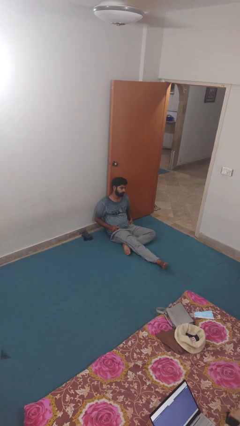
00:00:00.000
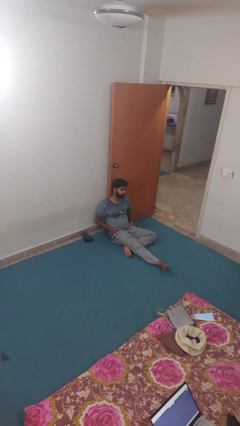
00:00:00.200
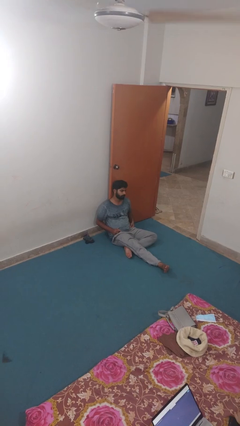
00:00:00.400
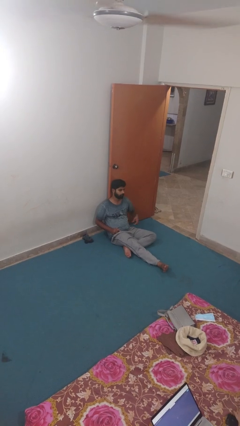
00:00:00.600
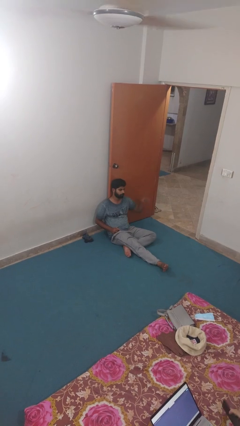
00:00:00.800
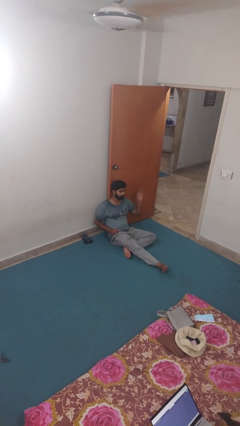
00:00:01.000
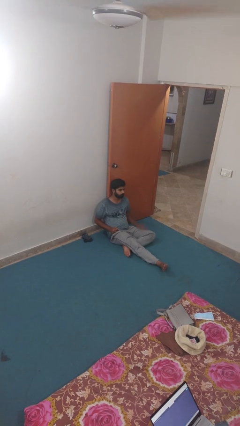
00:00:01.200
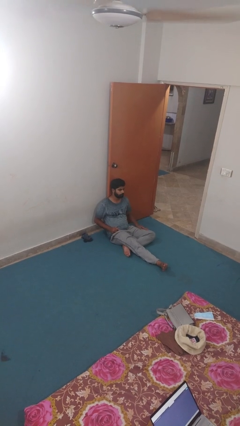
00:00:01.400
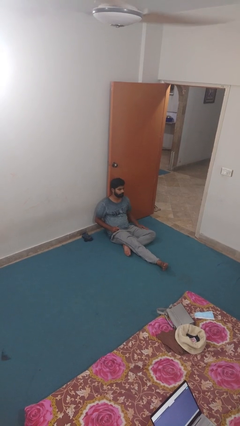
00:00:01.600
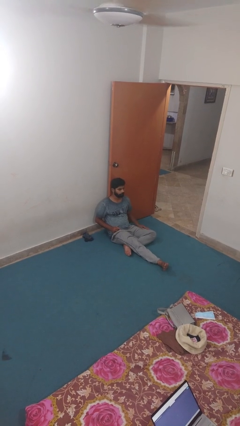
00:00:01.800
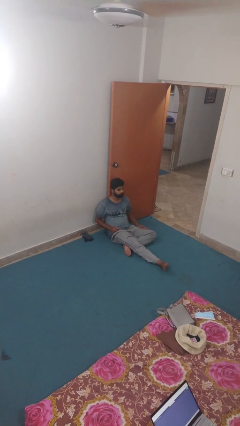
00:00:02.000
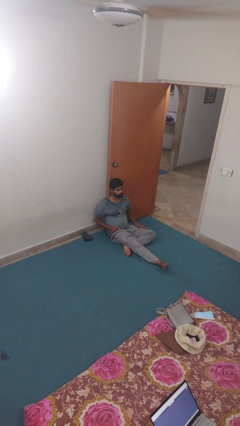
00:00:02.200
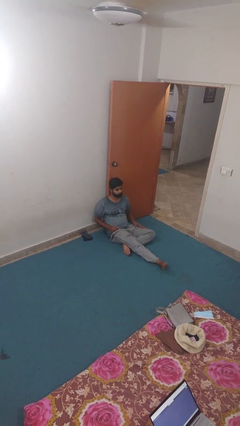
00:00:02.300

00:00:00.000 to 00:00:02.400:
person slaps hands on thighs

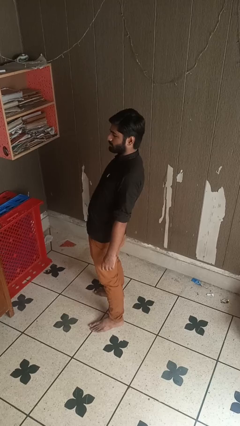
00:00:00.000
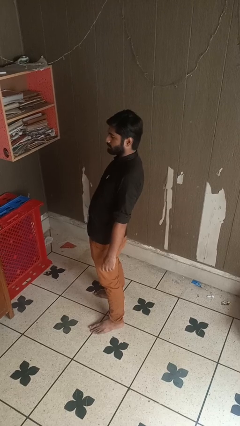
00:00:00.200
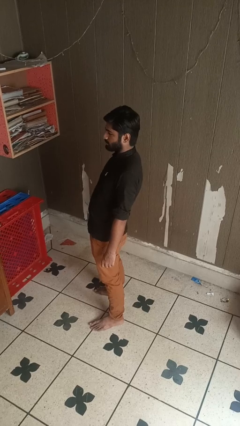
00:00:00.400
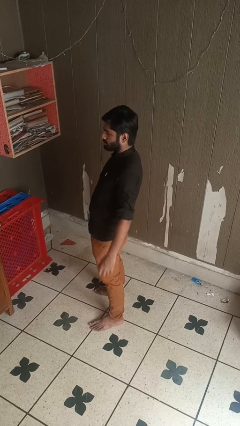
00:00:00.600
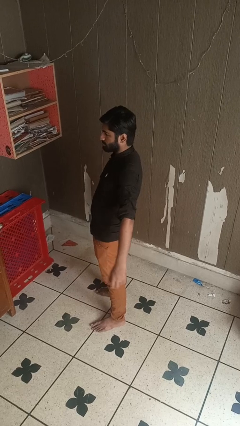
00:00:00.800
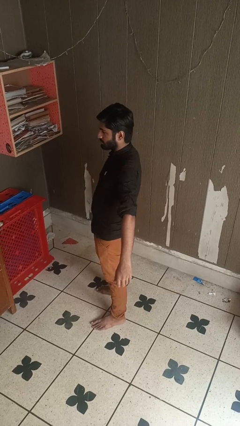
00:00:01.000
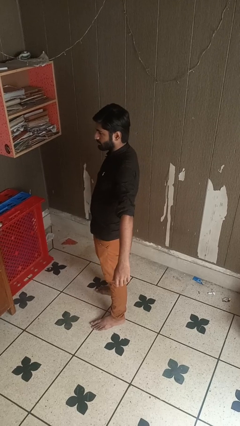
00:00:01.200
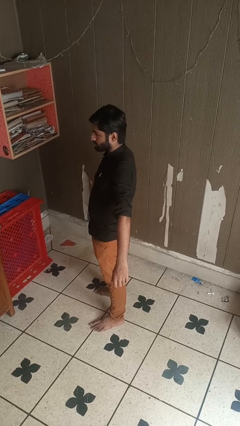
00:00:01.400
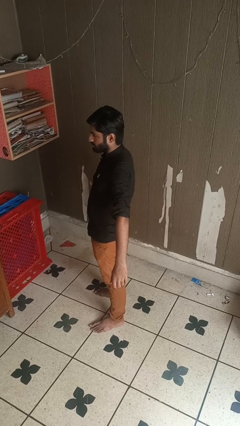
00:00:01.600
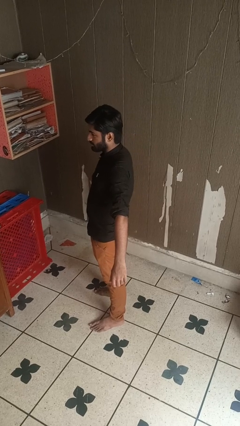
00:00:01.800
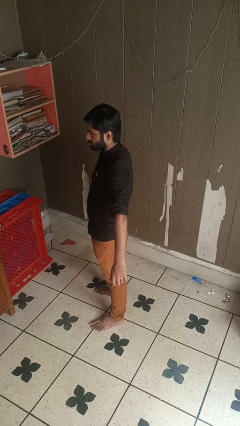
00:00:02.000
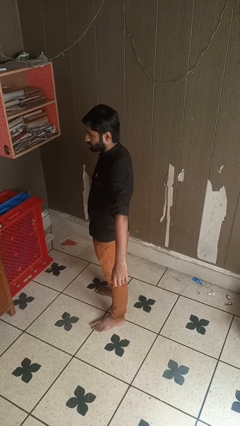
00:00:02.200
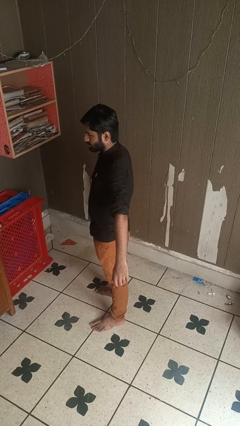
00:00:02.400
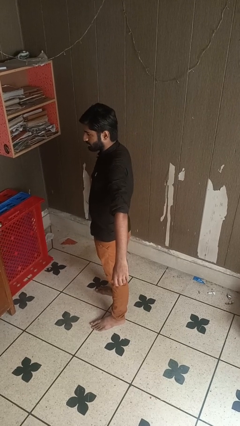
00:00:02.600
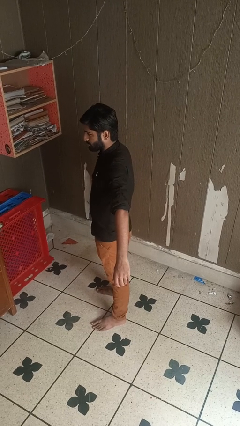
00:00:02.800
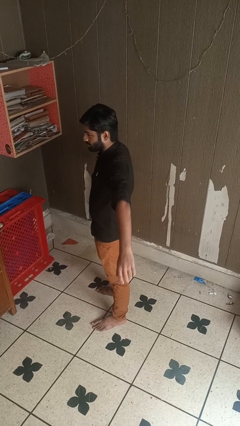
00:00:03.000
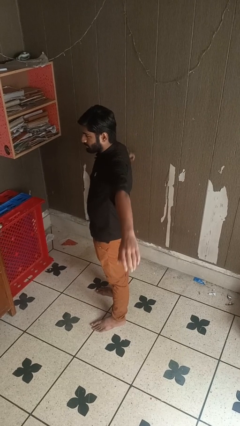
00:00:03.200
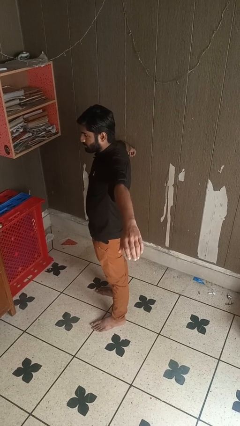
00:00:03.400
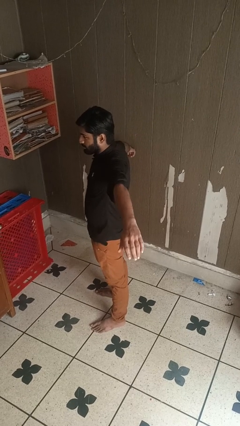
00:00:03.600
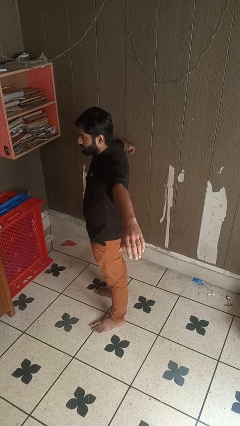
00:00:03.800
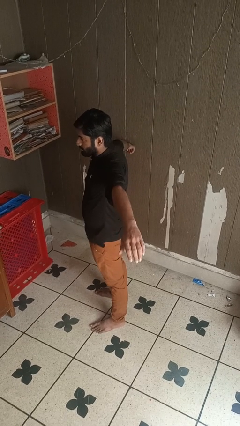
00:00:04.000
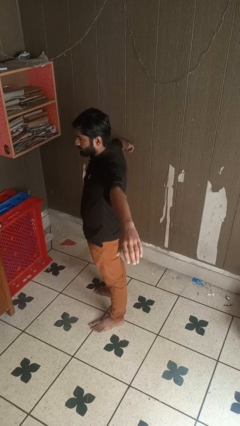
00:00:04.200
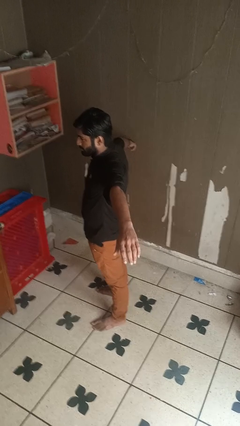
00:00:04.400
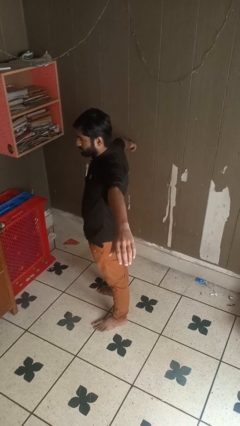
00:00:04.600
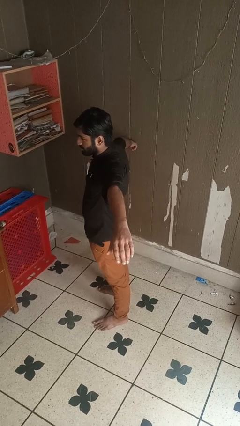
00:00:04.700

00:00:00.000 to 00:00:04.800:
person stretches arms to side

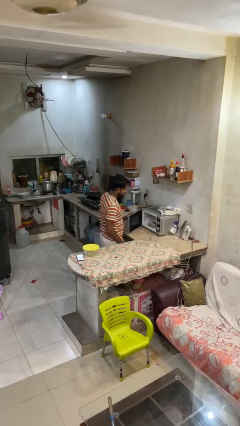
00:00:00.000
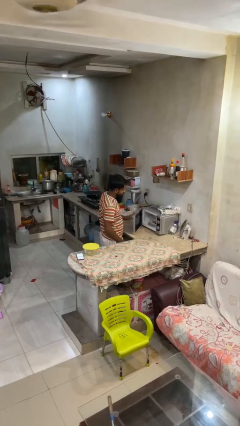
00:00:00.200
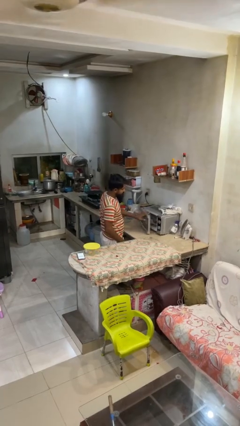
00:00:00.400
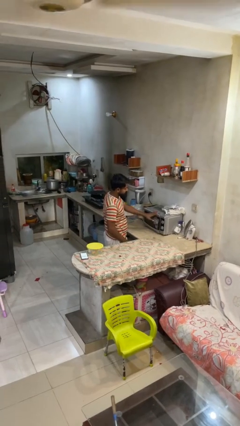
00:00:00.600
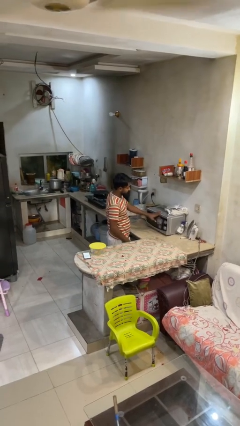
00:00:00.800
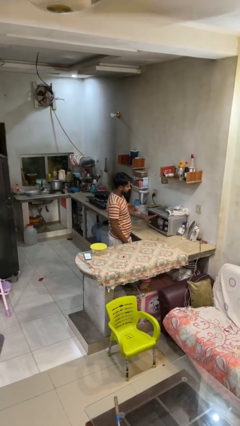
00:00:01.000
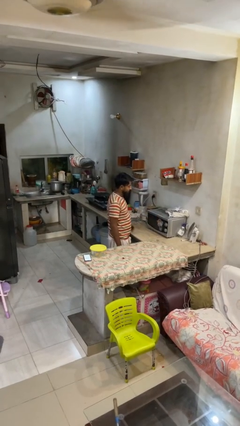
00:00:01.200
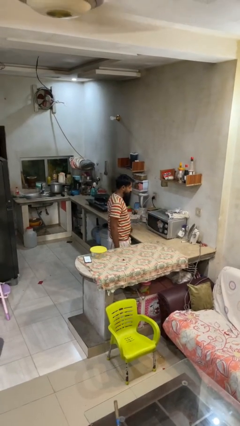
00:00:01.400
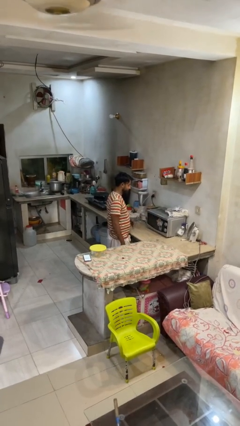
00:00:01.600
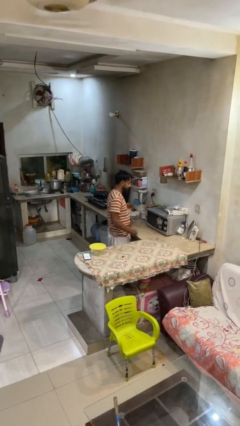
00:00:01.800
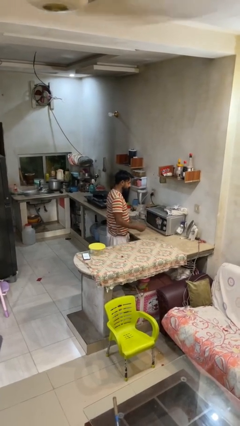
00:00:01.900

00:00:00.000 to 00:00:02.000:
person closes microwave

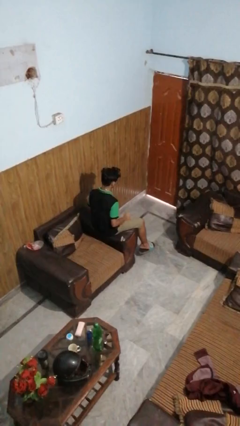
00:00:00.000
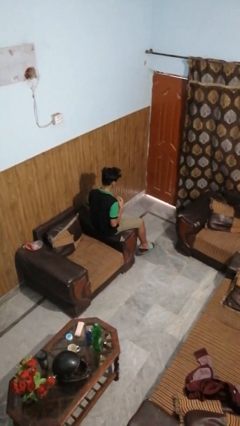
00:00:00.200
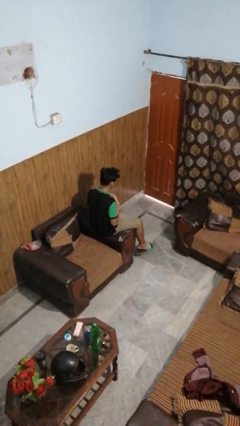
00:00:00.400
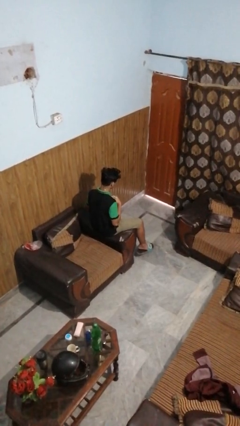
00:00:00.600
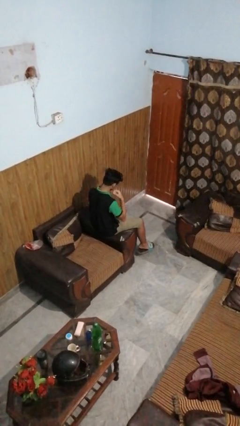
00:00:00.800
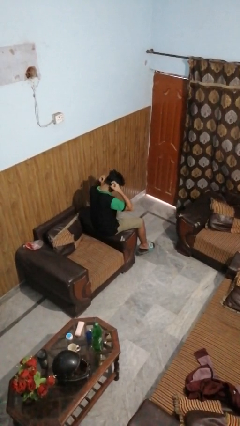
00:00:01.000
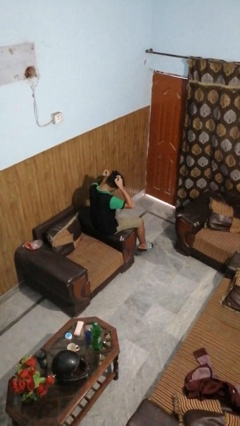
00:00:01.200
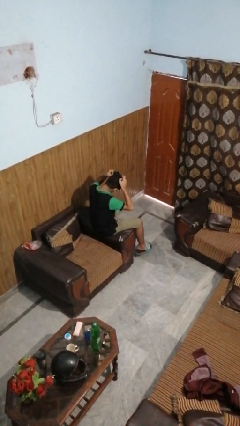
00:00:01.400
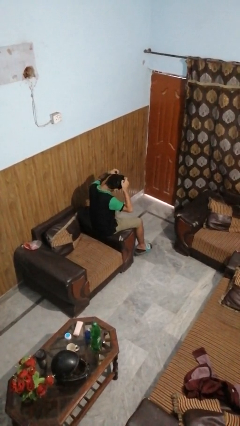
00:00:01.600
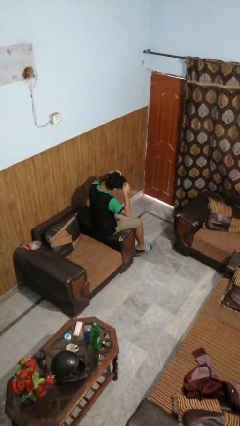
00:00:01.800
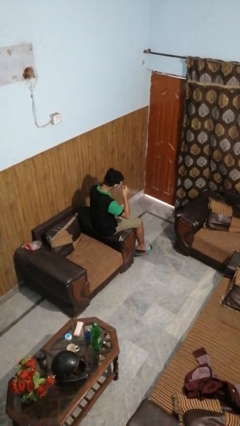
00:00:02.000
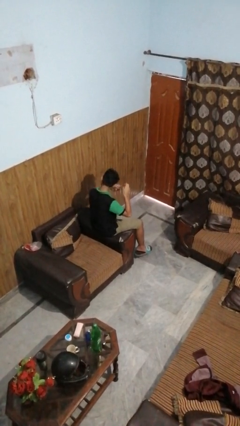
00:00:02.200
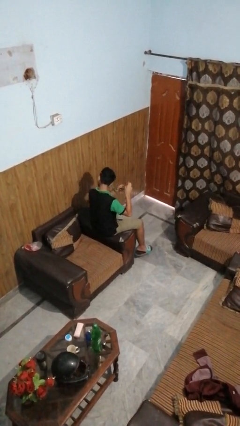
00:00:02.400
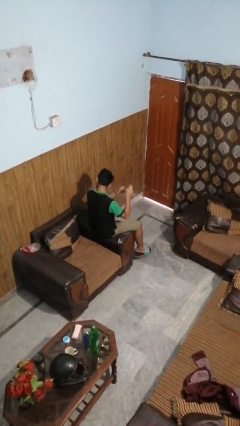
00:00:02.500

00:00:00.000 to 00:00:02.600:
person takes off necklace

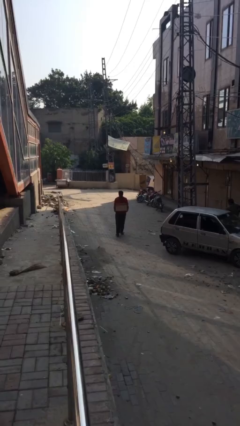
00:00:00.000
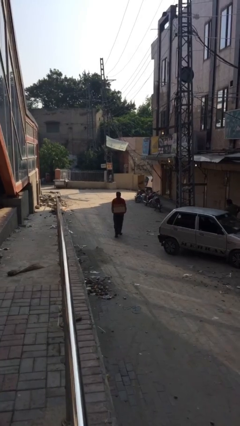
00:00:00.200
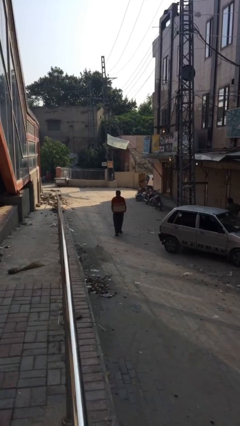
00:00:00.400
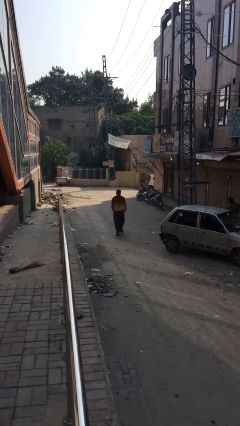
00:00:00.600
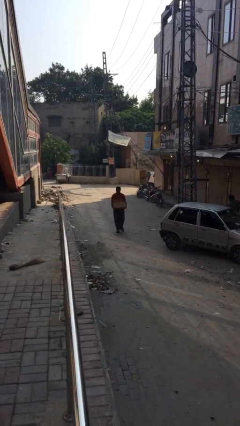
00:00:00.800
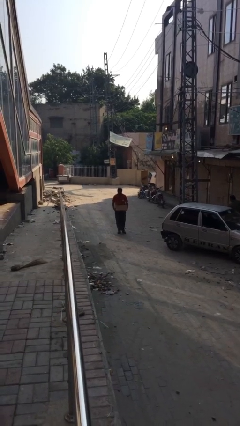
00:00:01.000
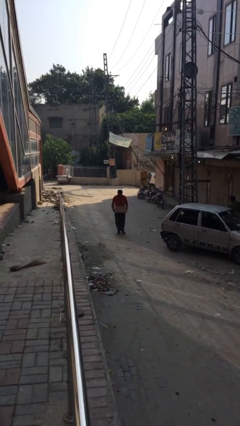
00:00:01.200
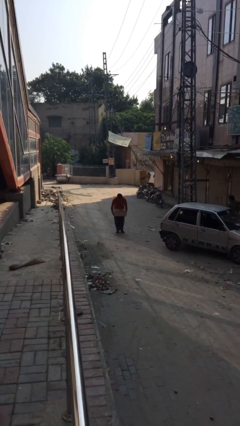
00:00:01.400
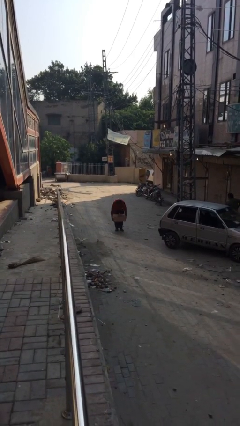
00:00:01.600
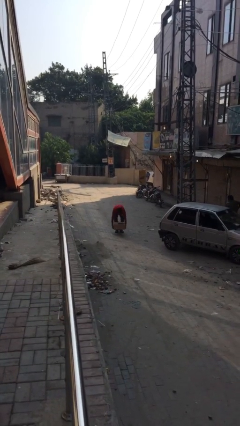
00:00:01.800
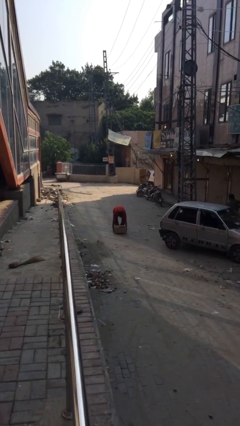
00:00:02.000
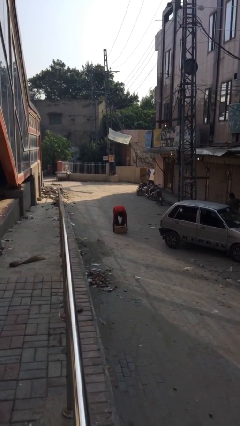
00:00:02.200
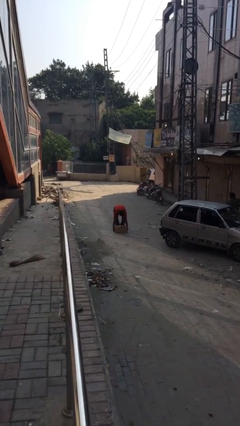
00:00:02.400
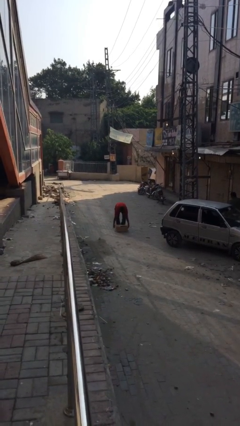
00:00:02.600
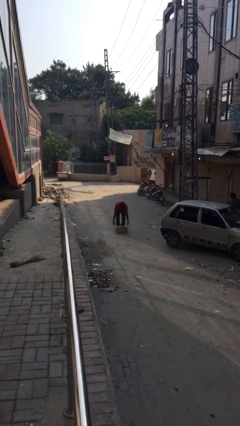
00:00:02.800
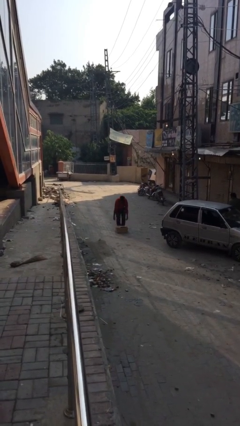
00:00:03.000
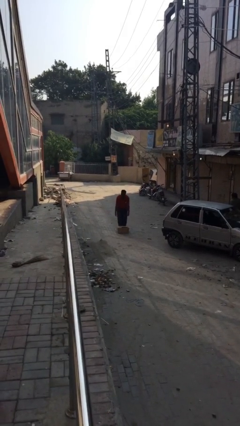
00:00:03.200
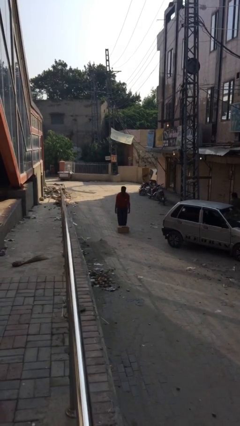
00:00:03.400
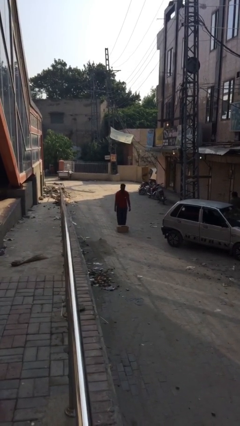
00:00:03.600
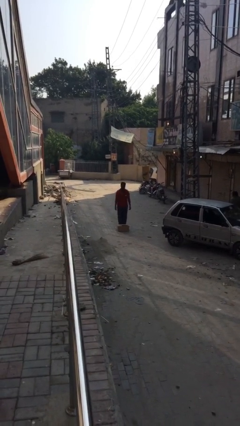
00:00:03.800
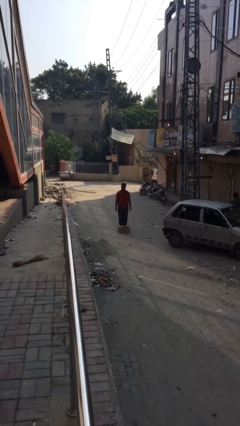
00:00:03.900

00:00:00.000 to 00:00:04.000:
person puts down object on floor

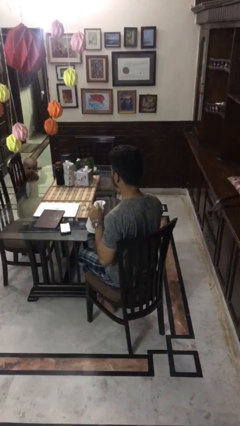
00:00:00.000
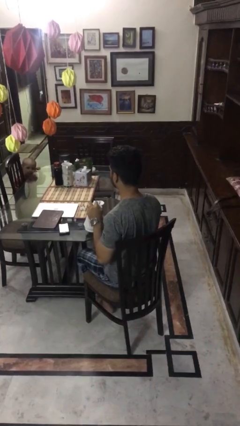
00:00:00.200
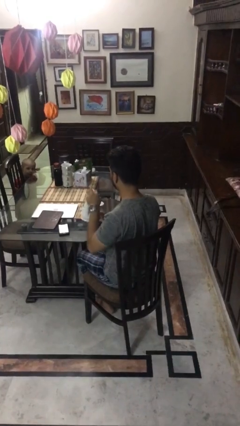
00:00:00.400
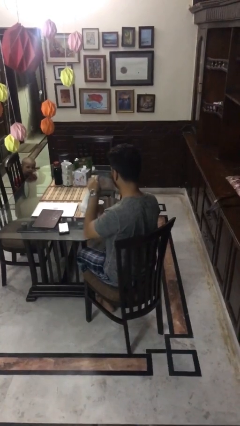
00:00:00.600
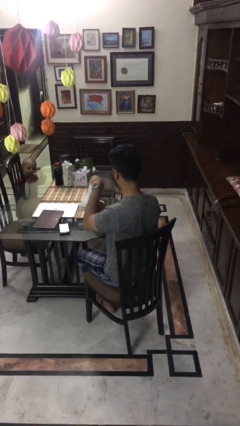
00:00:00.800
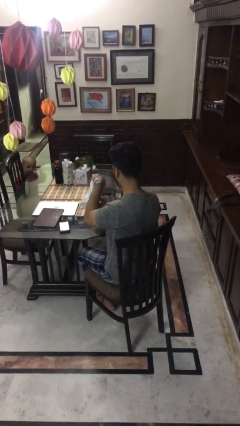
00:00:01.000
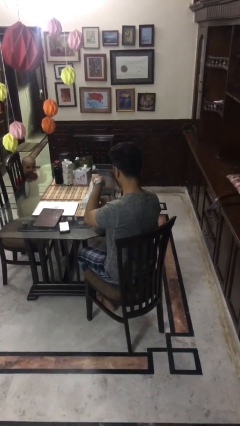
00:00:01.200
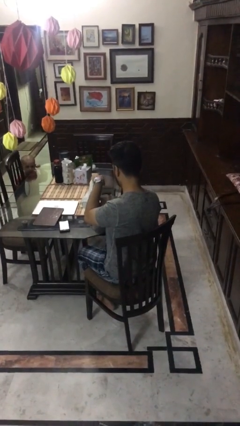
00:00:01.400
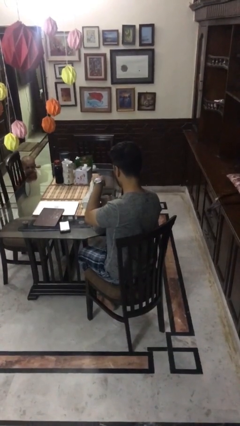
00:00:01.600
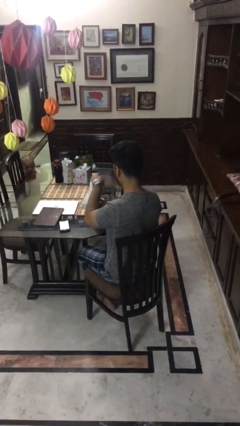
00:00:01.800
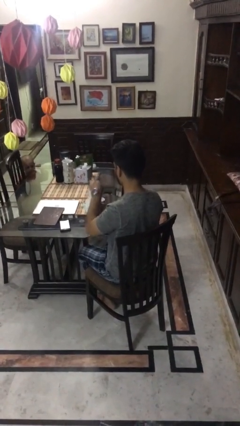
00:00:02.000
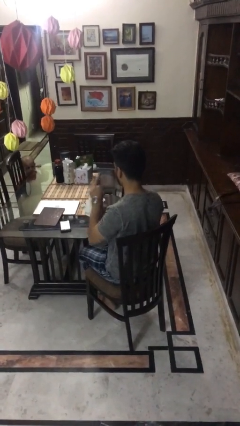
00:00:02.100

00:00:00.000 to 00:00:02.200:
person pours coffee into mug
